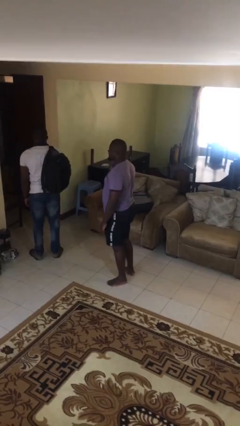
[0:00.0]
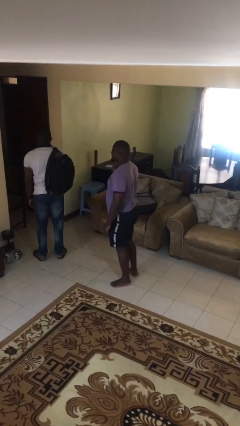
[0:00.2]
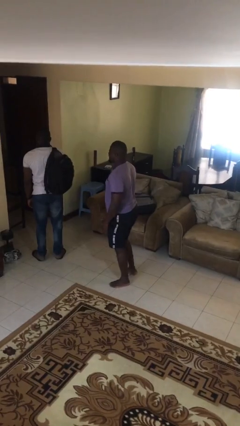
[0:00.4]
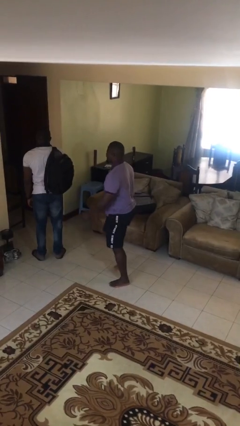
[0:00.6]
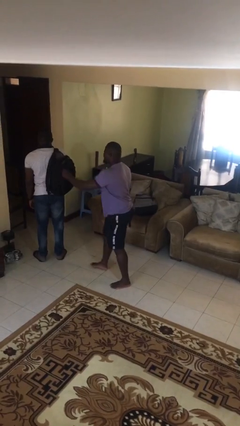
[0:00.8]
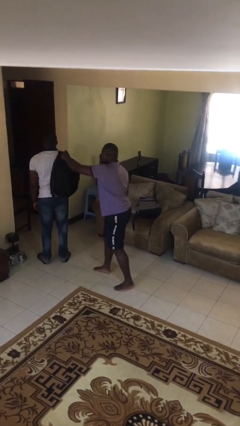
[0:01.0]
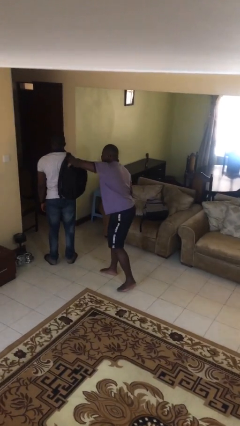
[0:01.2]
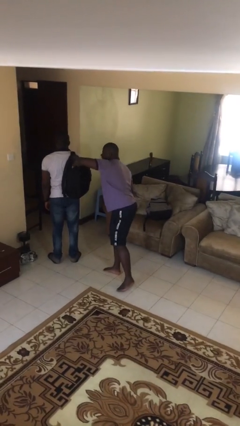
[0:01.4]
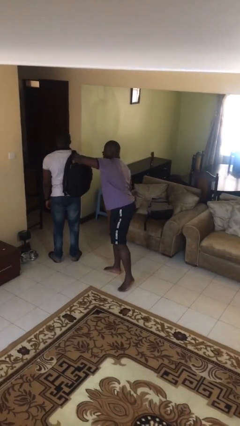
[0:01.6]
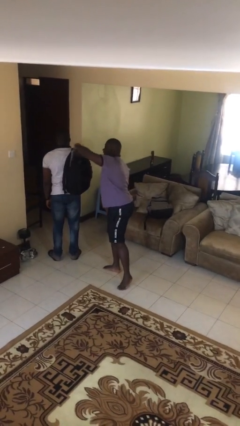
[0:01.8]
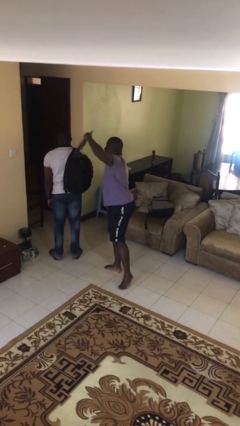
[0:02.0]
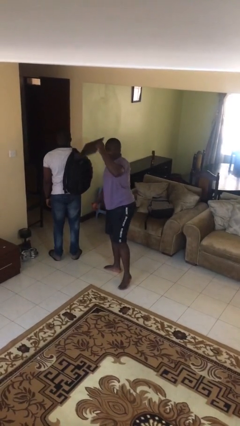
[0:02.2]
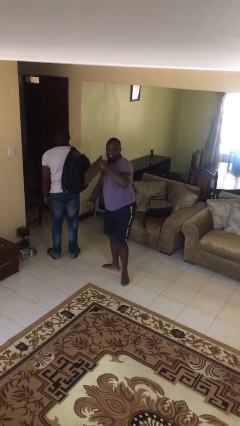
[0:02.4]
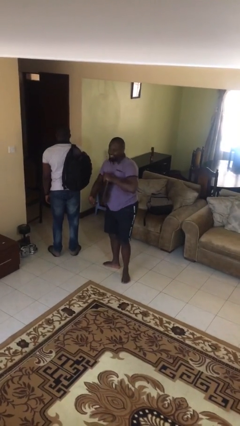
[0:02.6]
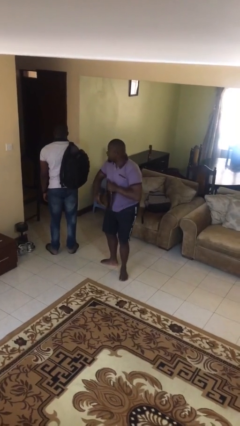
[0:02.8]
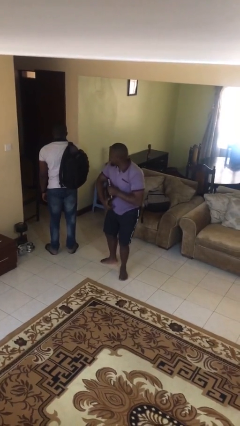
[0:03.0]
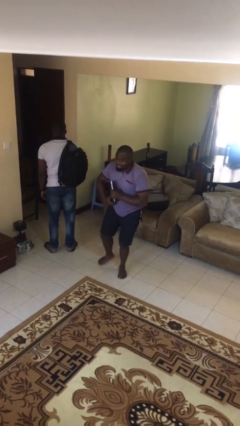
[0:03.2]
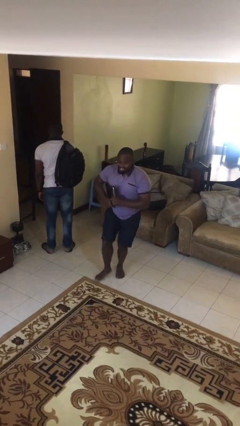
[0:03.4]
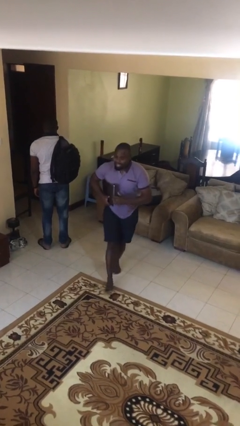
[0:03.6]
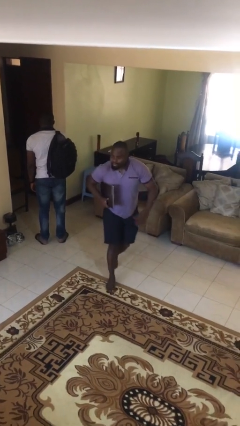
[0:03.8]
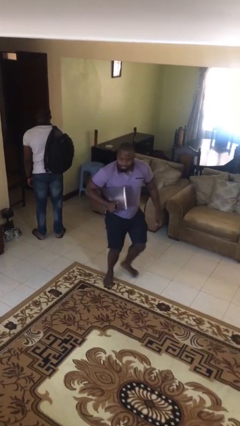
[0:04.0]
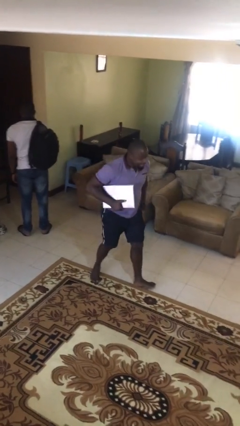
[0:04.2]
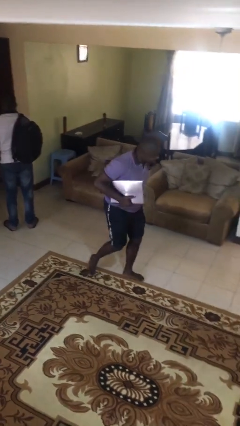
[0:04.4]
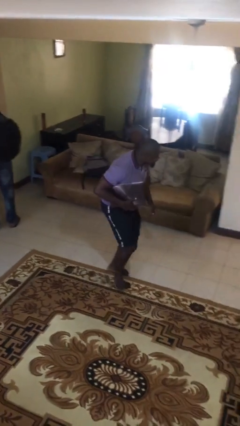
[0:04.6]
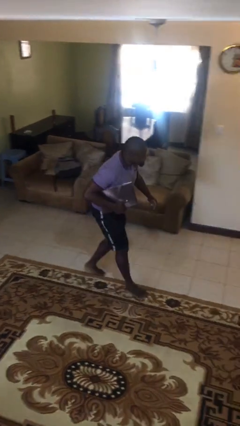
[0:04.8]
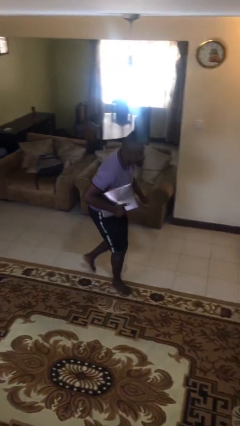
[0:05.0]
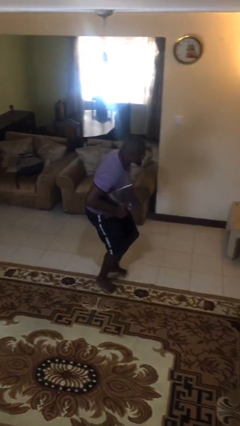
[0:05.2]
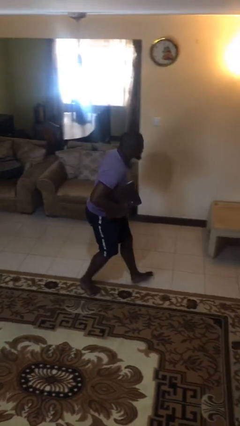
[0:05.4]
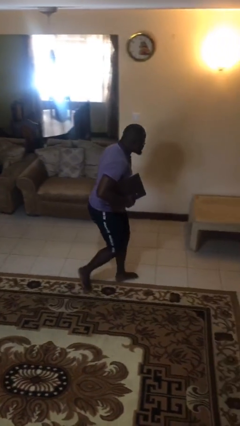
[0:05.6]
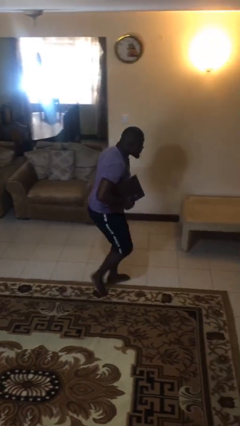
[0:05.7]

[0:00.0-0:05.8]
person steals object from person

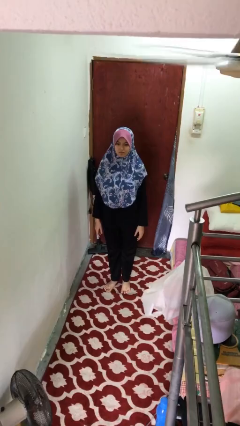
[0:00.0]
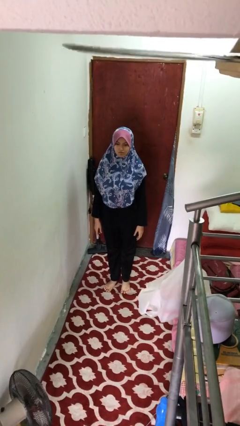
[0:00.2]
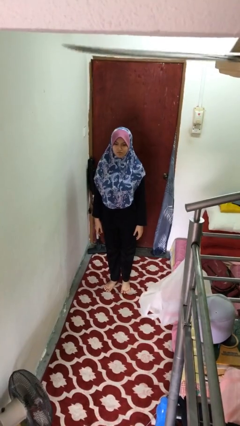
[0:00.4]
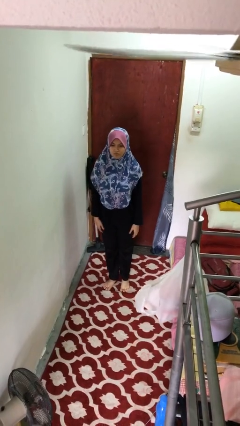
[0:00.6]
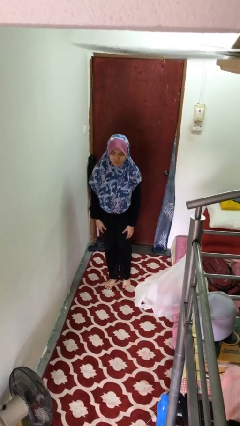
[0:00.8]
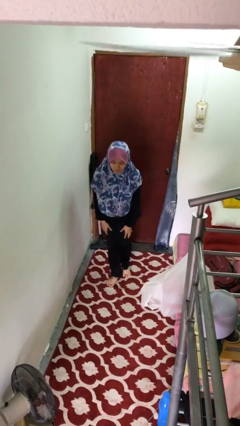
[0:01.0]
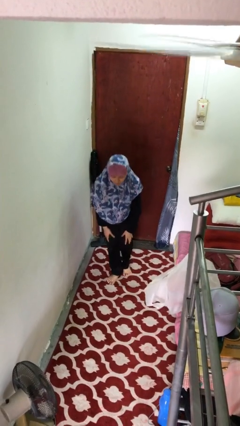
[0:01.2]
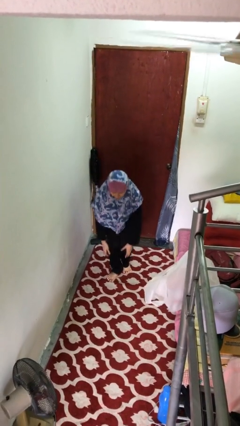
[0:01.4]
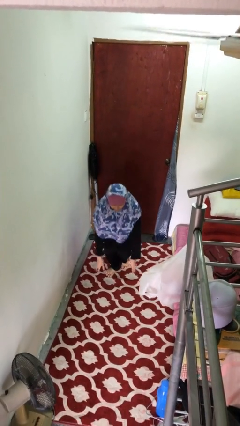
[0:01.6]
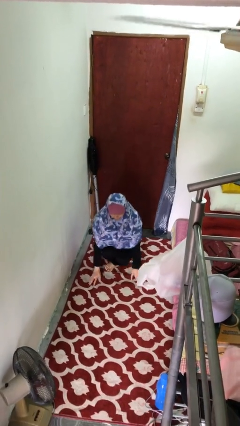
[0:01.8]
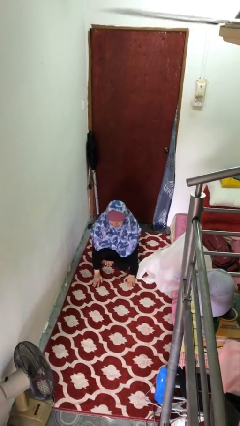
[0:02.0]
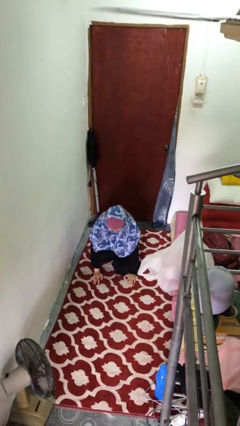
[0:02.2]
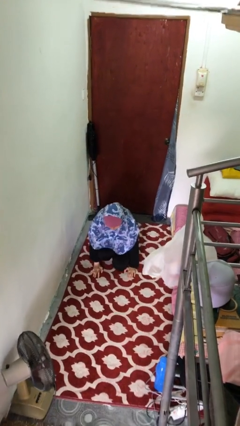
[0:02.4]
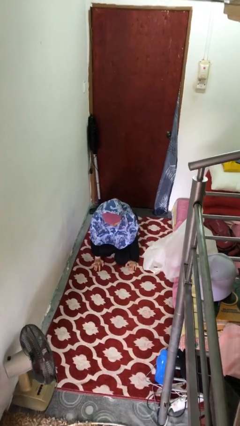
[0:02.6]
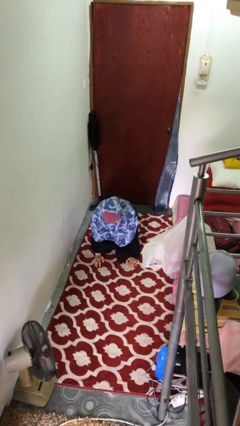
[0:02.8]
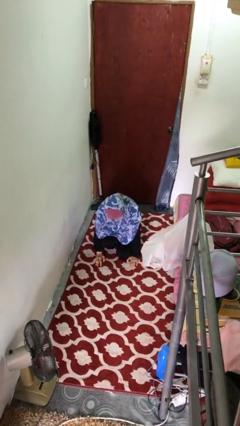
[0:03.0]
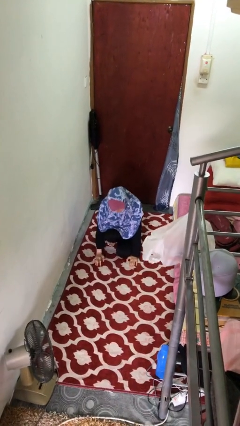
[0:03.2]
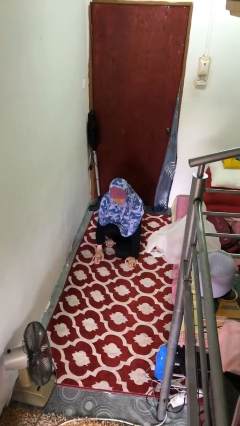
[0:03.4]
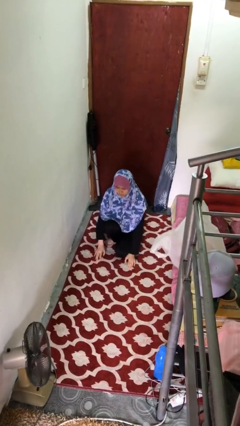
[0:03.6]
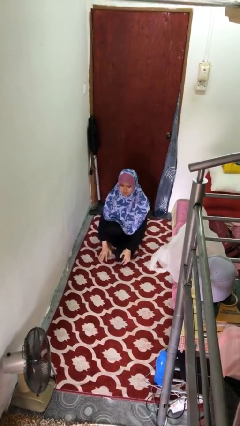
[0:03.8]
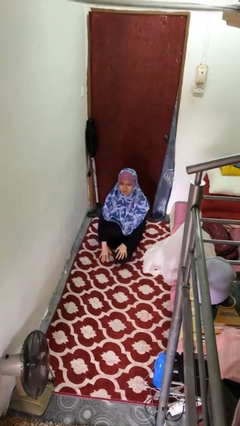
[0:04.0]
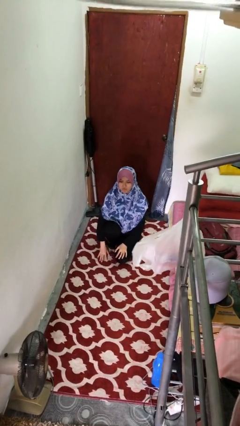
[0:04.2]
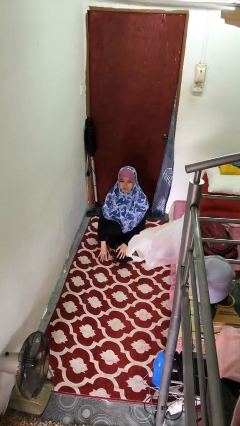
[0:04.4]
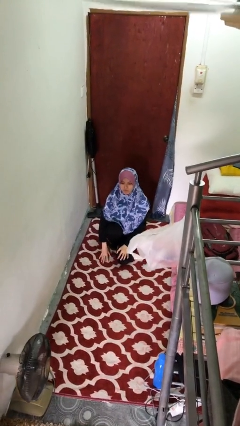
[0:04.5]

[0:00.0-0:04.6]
person kneels

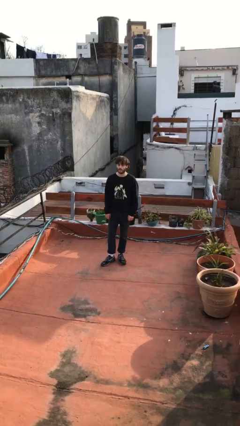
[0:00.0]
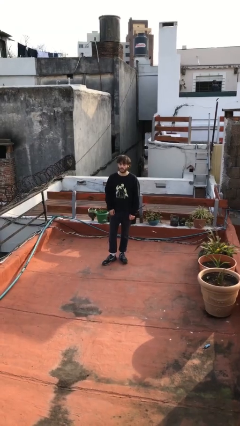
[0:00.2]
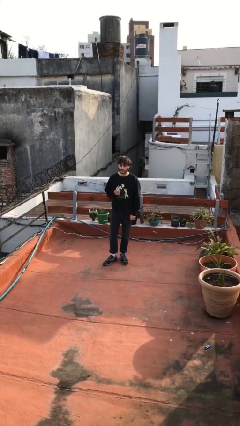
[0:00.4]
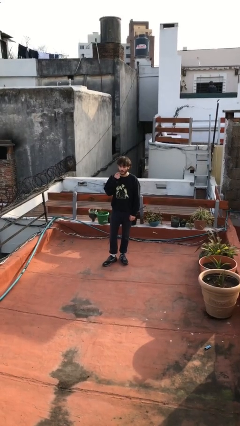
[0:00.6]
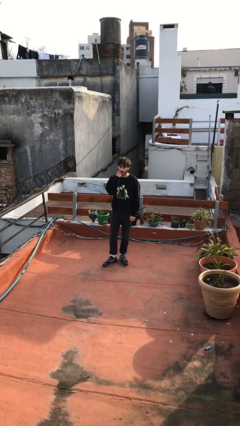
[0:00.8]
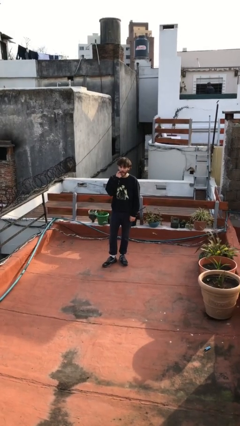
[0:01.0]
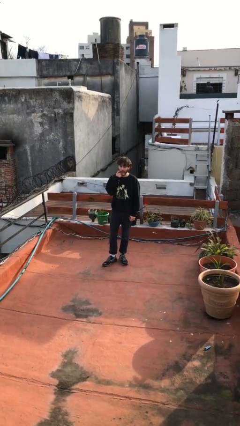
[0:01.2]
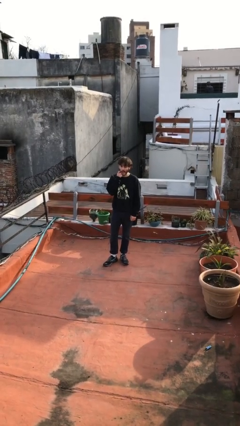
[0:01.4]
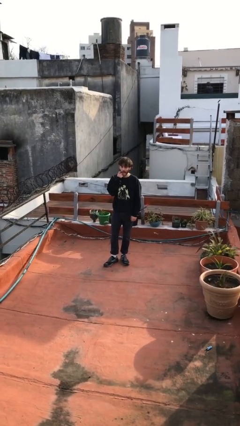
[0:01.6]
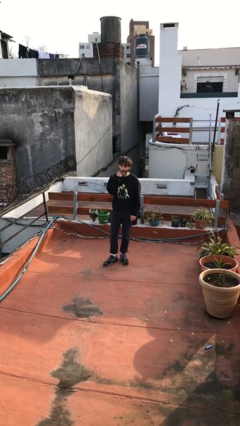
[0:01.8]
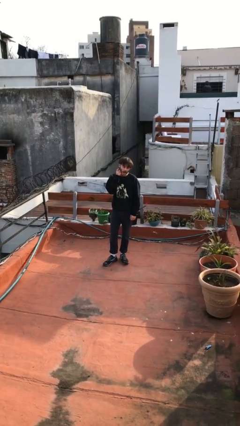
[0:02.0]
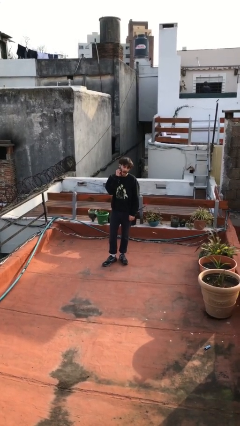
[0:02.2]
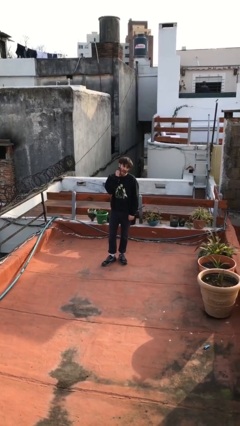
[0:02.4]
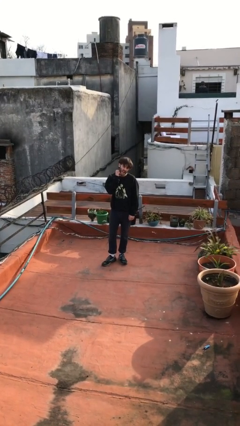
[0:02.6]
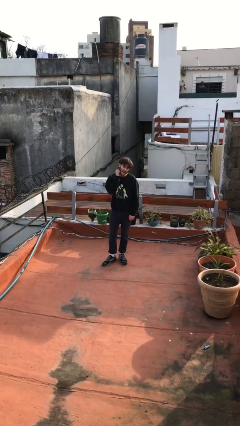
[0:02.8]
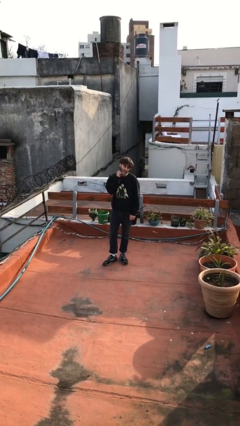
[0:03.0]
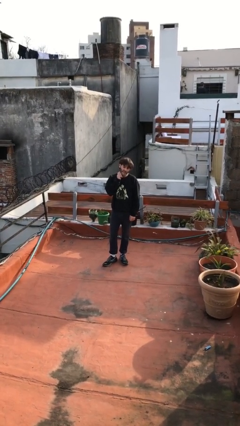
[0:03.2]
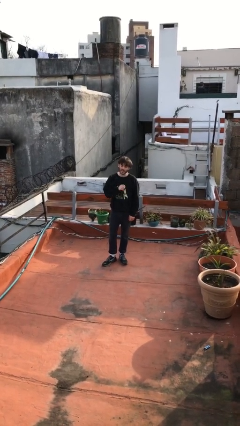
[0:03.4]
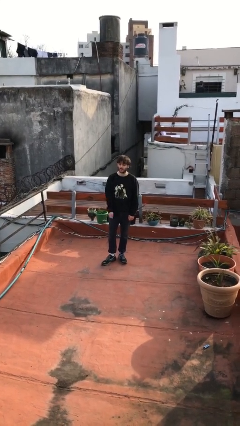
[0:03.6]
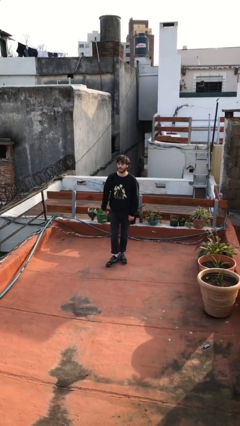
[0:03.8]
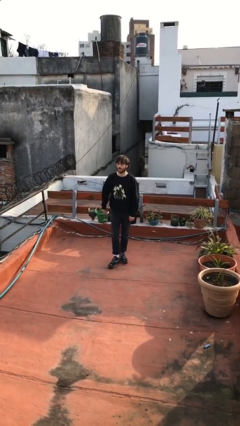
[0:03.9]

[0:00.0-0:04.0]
person scratches face

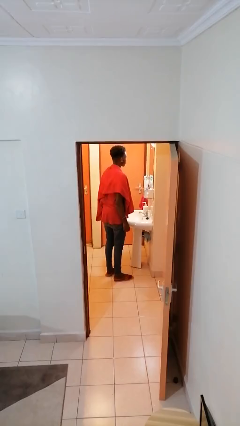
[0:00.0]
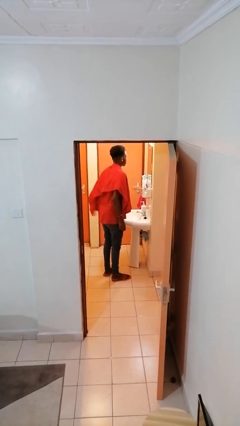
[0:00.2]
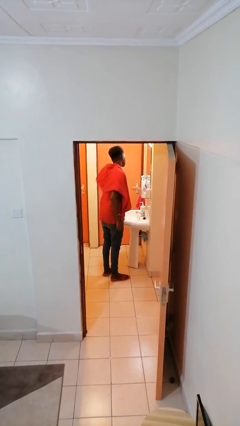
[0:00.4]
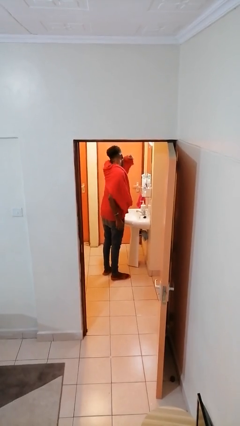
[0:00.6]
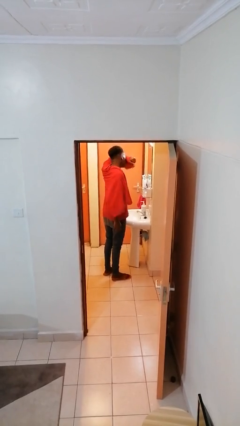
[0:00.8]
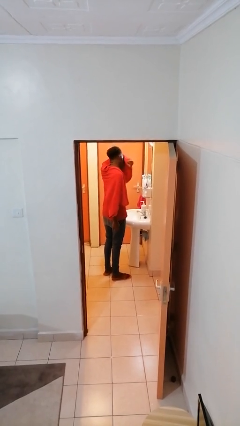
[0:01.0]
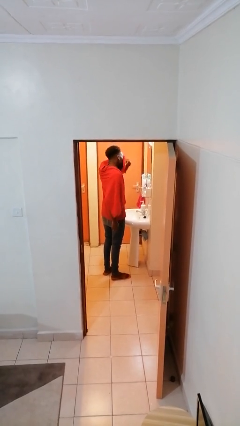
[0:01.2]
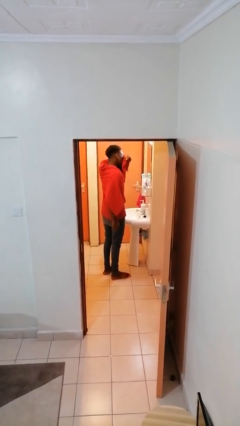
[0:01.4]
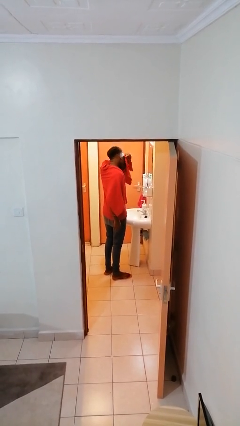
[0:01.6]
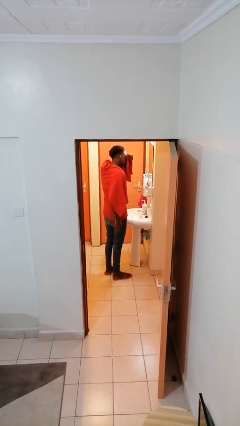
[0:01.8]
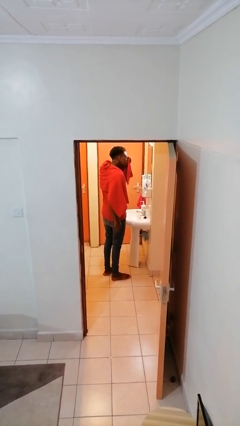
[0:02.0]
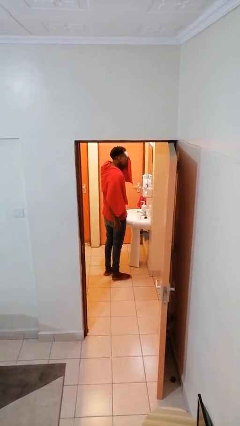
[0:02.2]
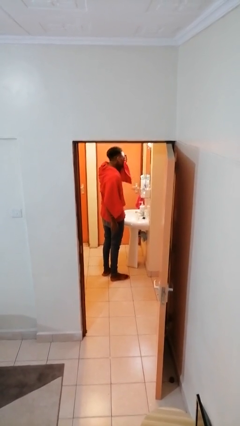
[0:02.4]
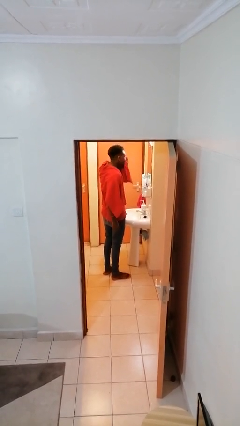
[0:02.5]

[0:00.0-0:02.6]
person dries face with towel

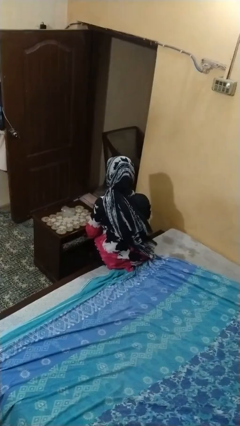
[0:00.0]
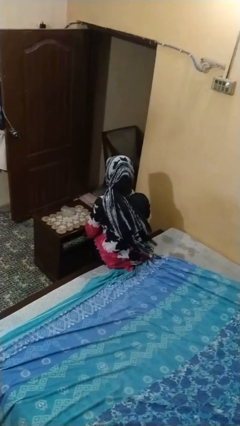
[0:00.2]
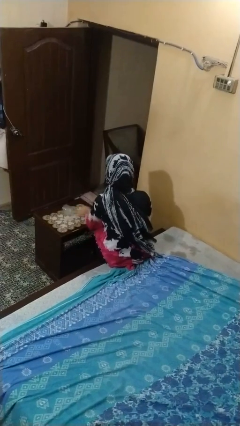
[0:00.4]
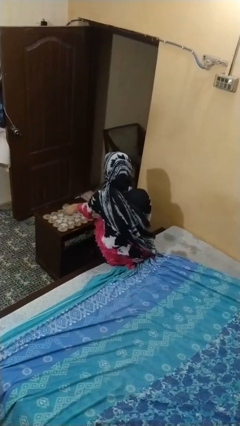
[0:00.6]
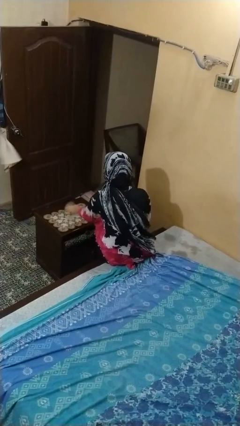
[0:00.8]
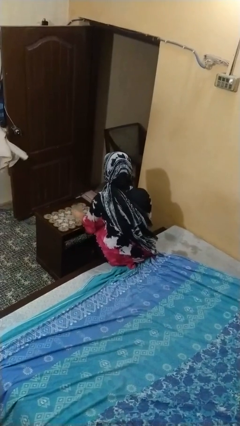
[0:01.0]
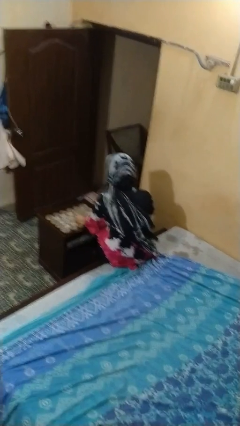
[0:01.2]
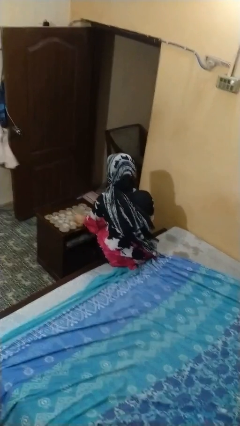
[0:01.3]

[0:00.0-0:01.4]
person sets upright glass
